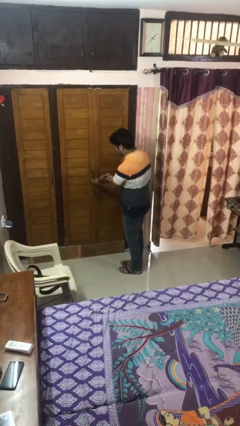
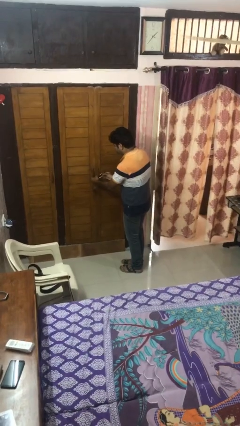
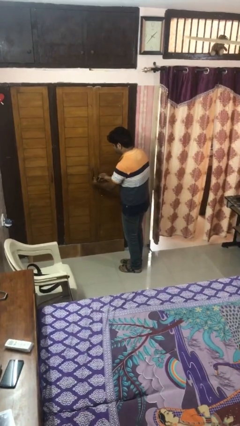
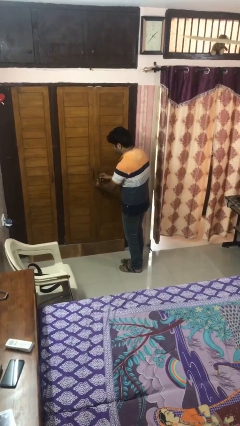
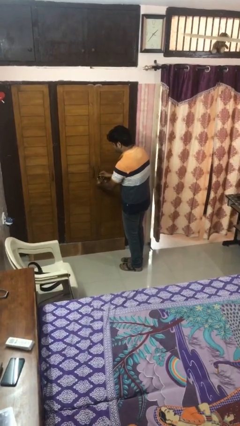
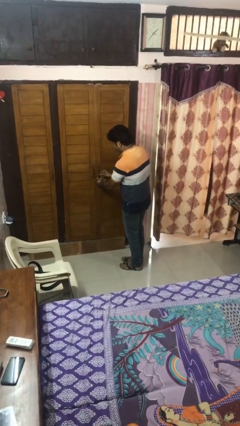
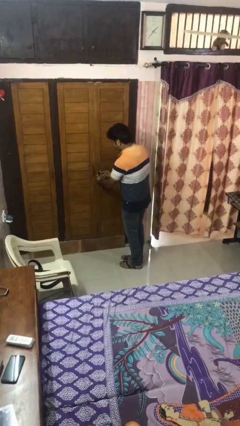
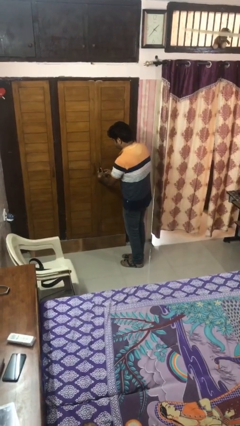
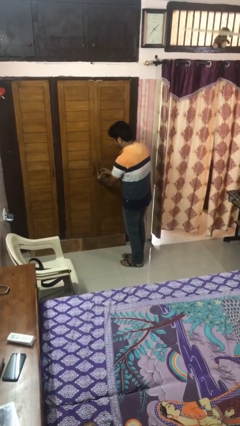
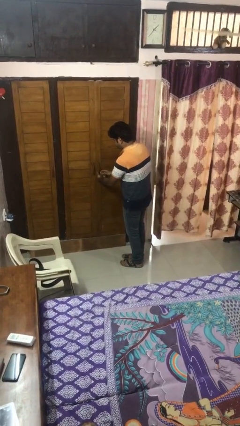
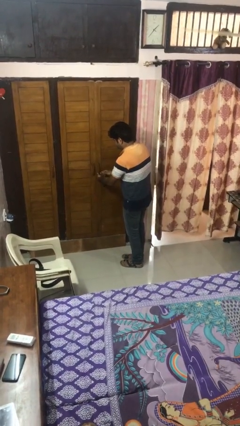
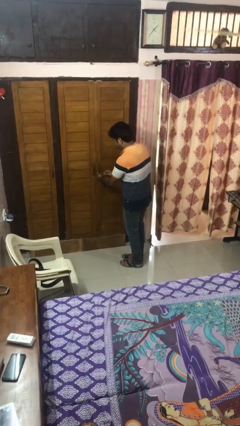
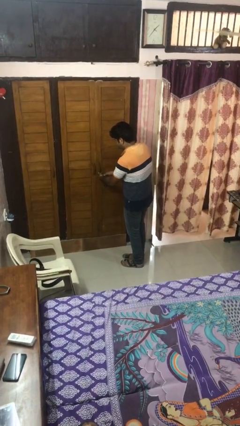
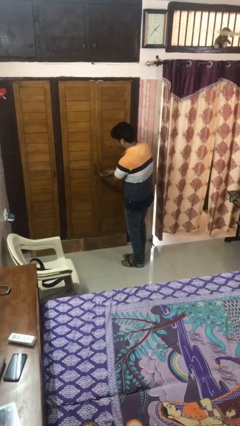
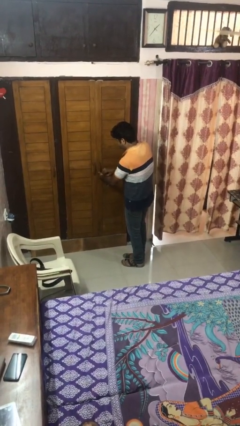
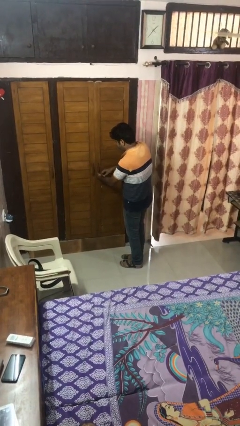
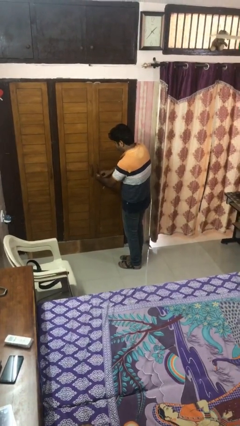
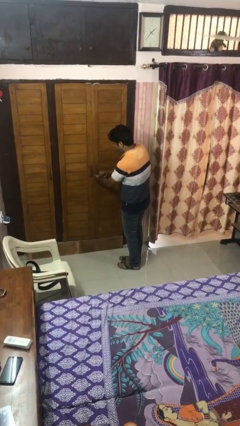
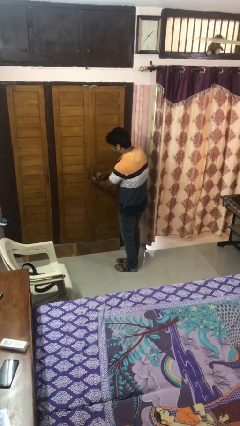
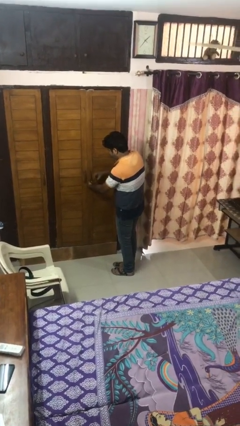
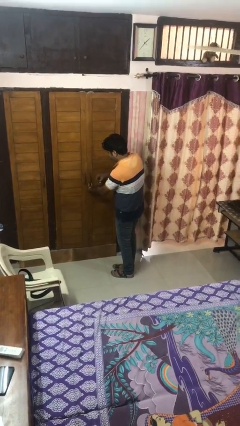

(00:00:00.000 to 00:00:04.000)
person locks door with keys

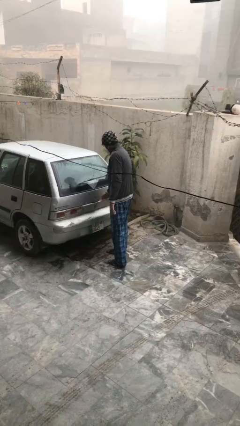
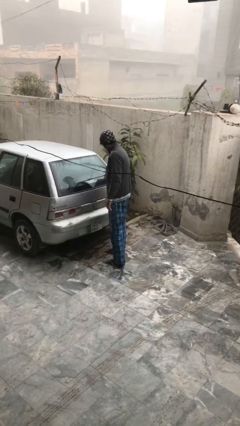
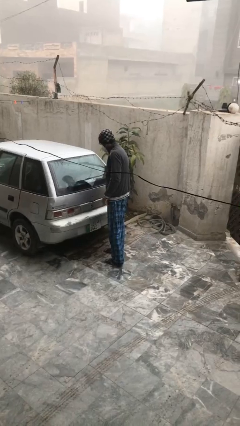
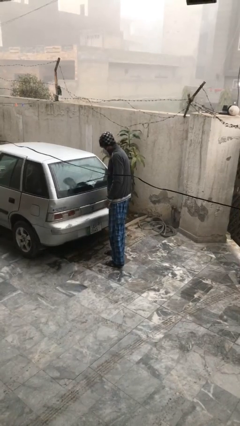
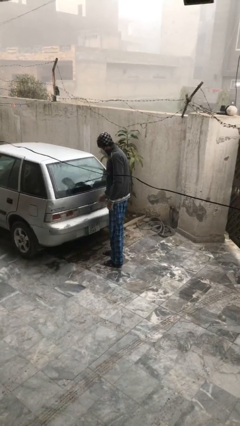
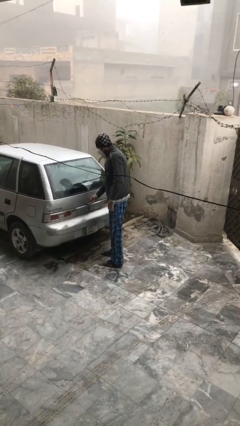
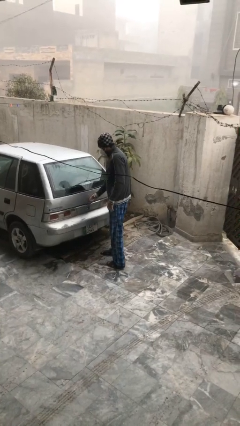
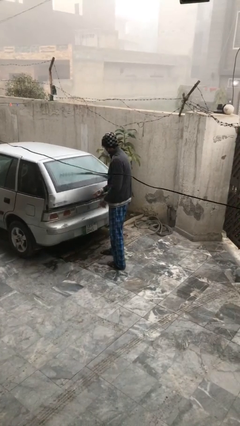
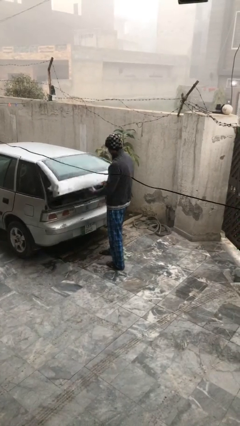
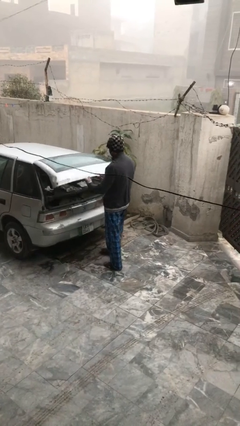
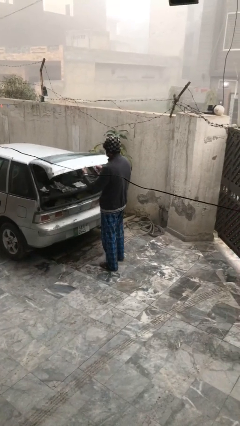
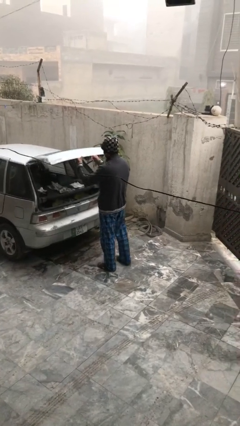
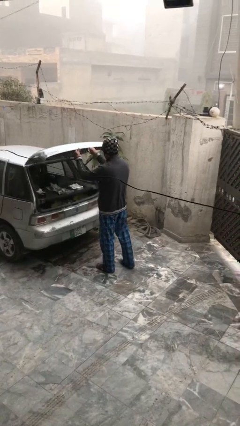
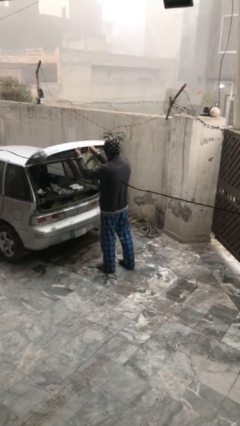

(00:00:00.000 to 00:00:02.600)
person opens car trunk

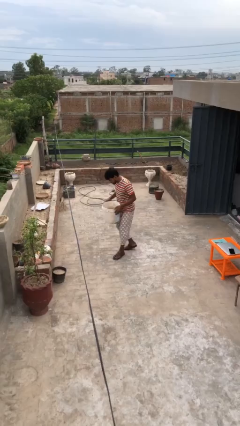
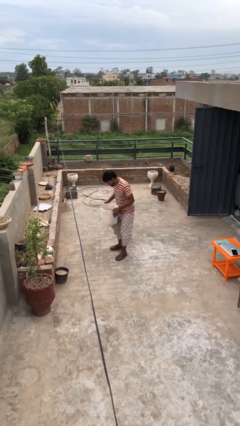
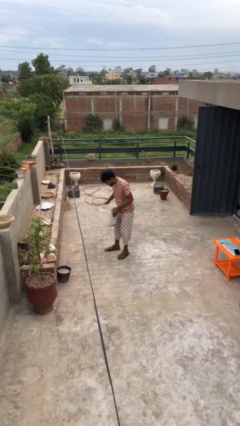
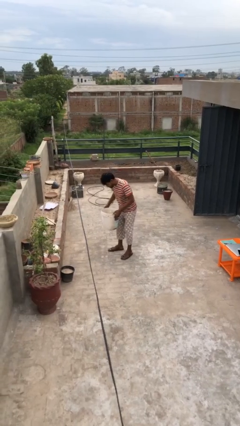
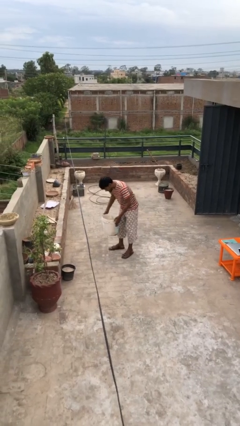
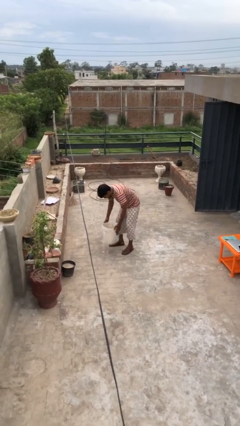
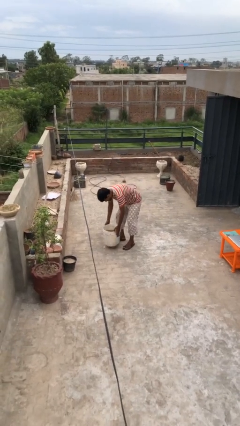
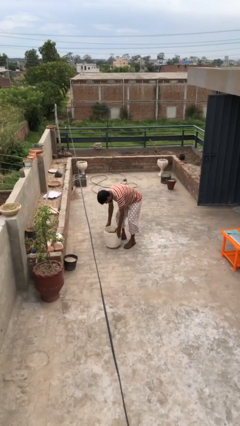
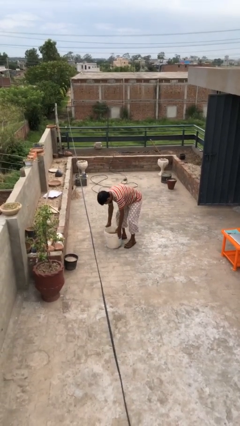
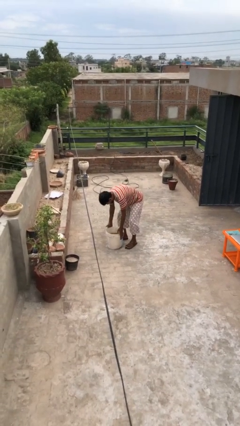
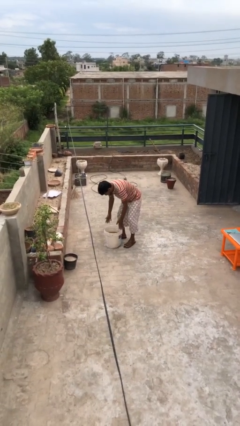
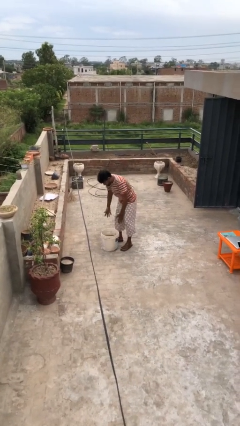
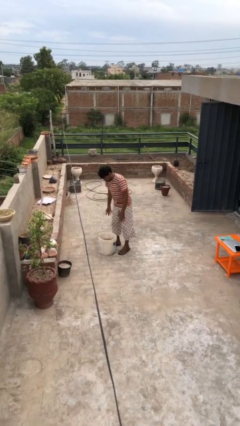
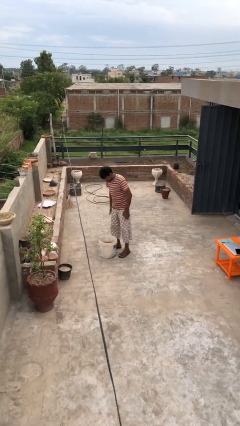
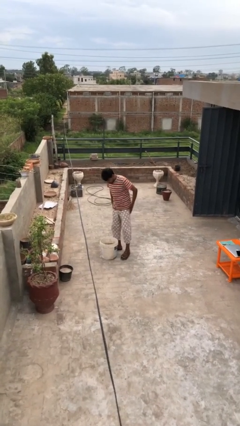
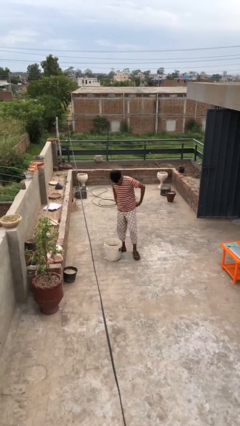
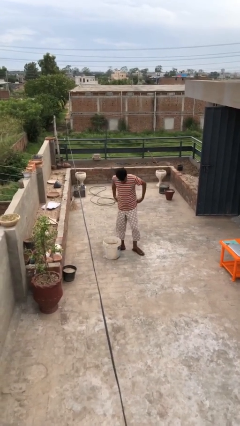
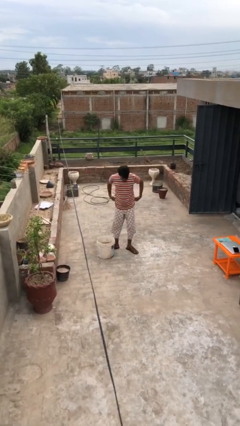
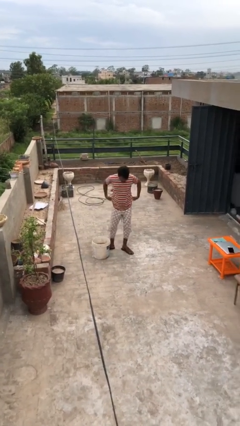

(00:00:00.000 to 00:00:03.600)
person puts down object on floor

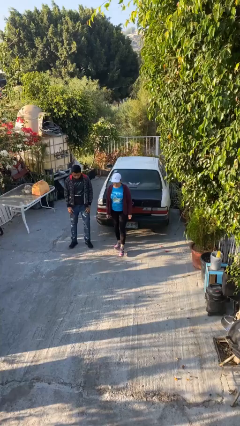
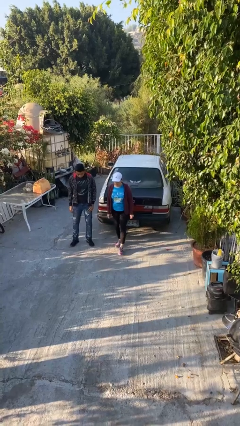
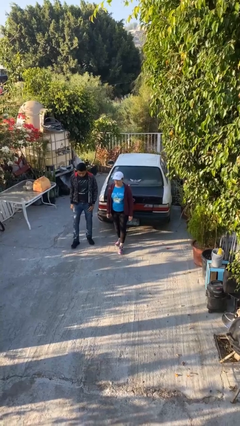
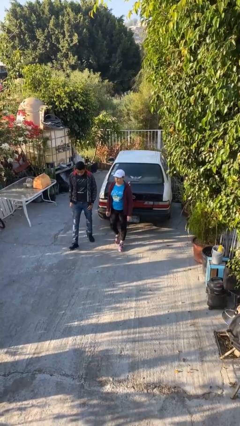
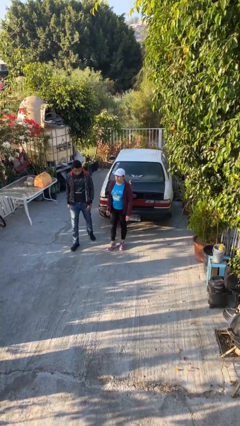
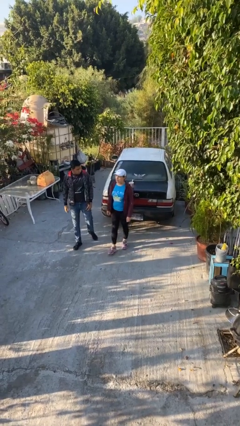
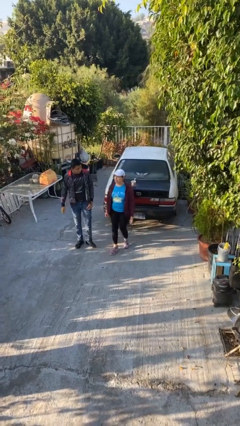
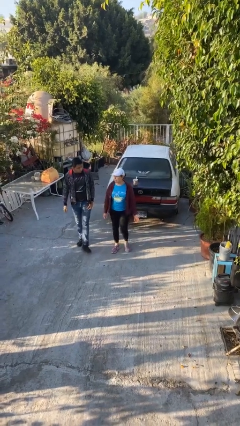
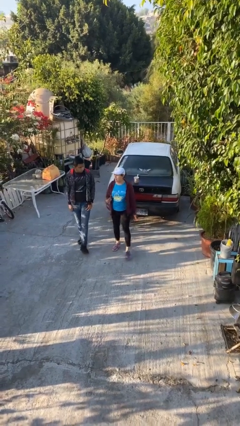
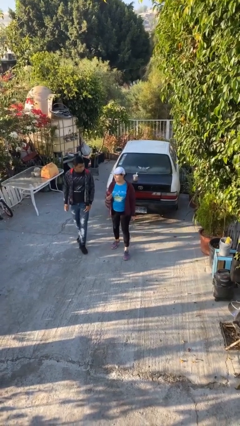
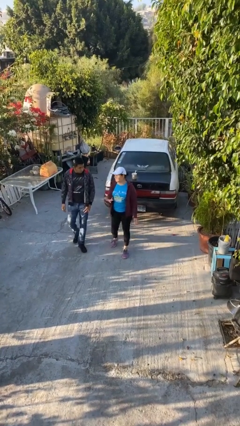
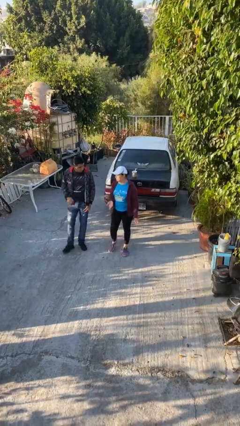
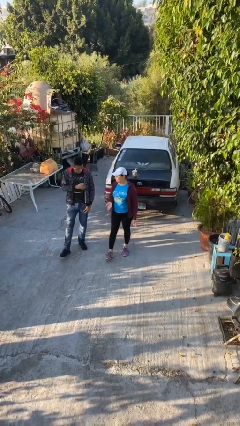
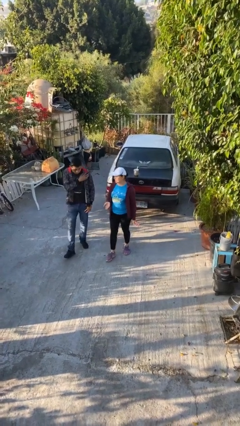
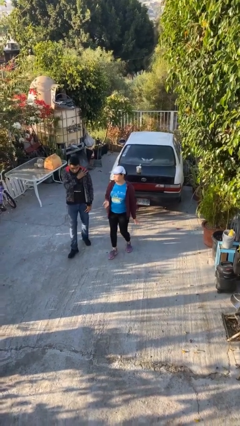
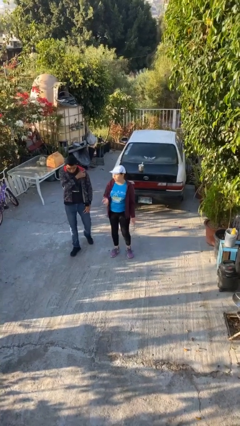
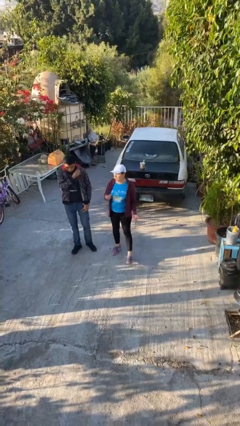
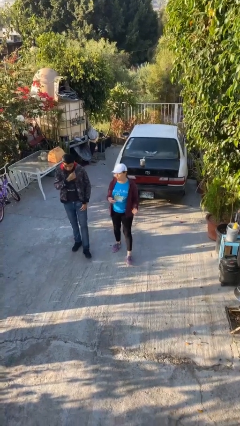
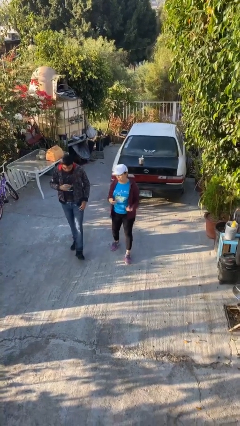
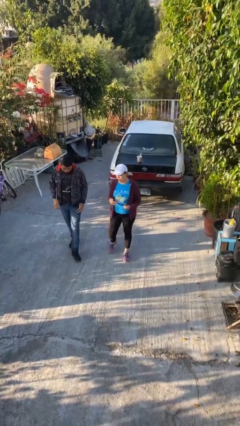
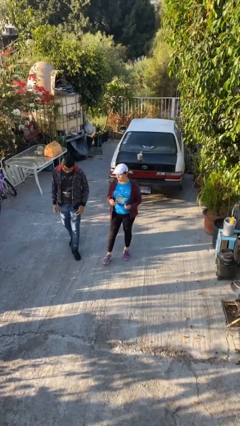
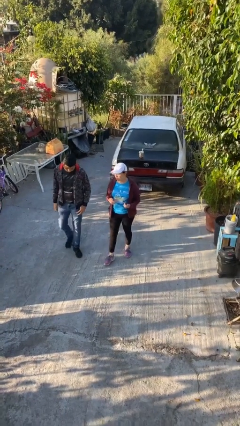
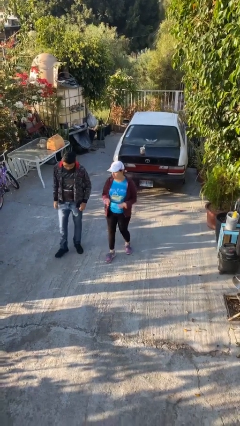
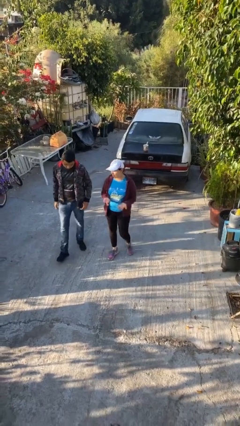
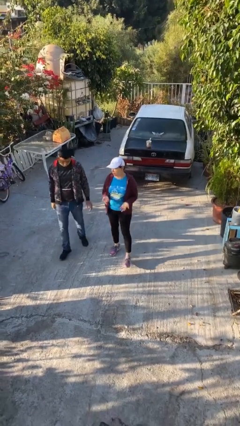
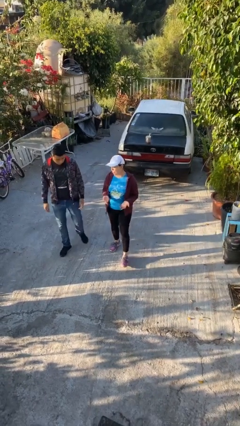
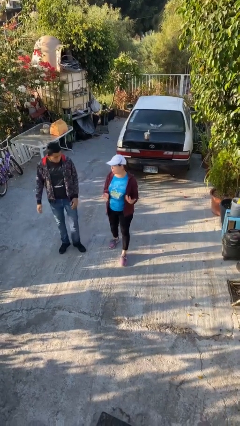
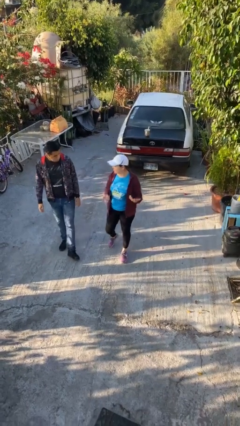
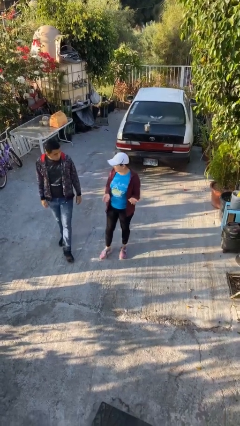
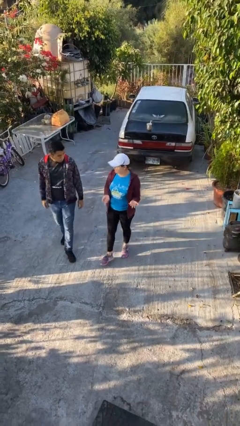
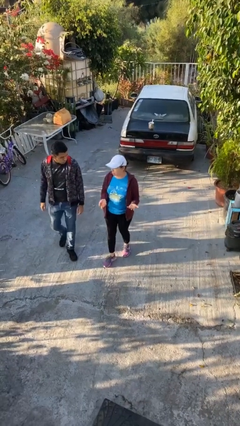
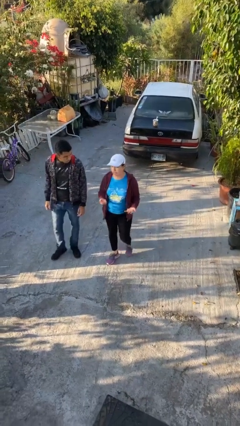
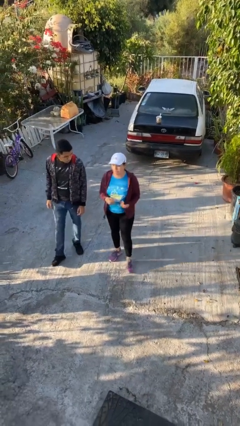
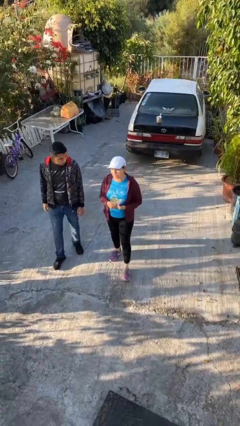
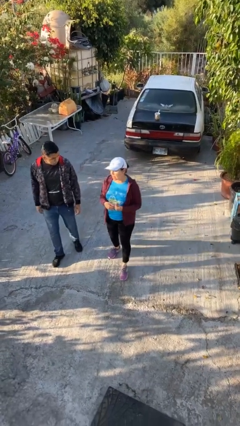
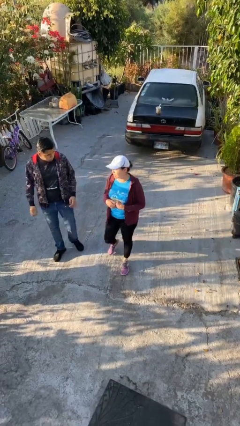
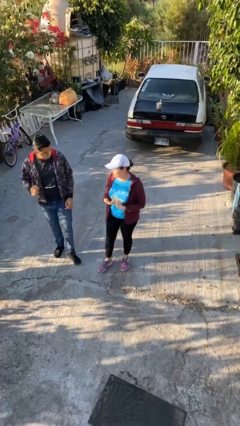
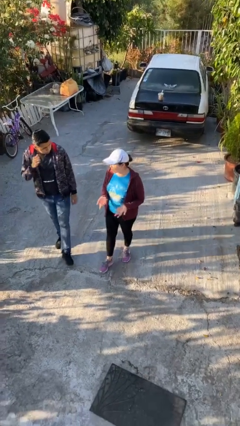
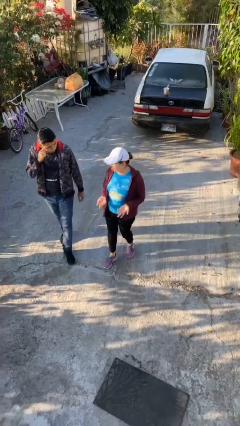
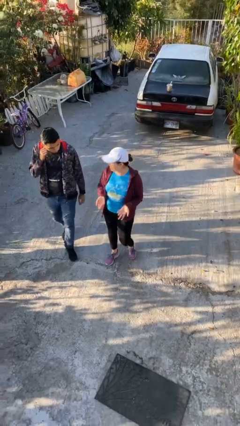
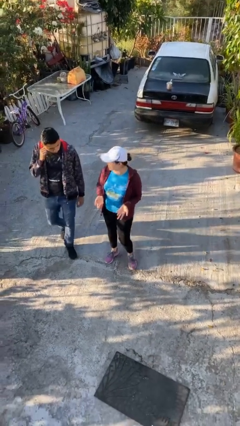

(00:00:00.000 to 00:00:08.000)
person talks to person
